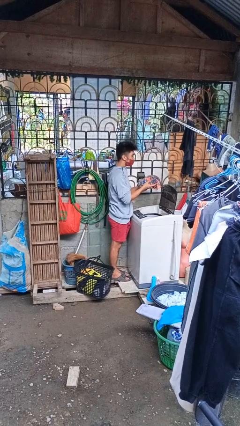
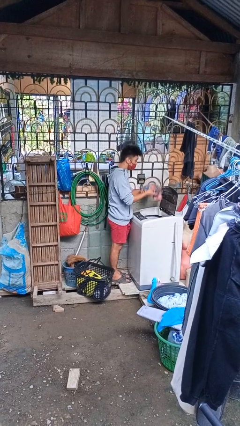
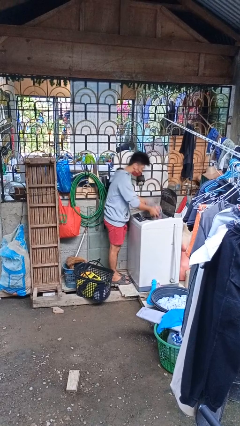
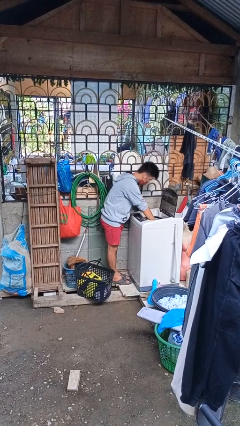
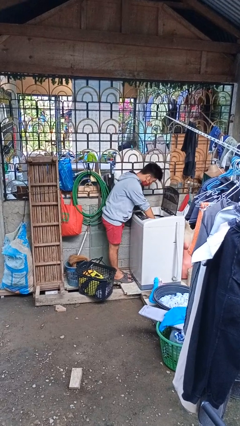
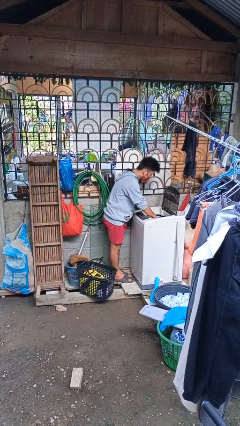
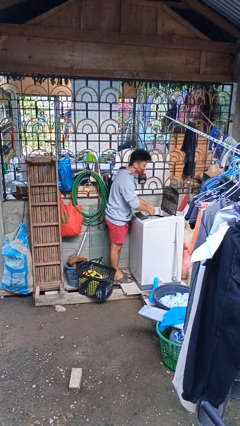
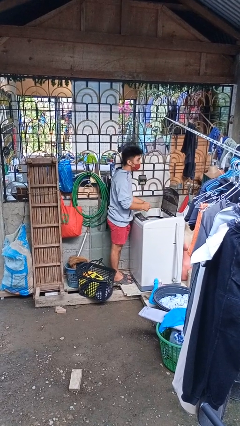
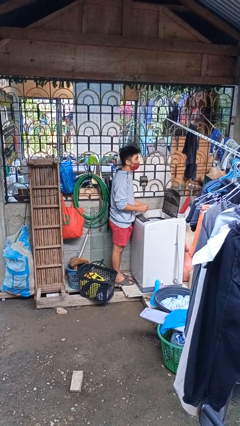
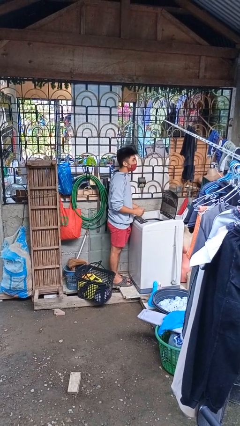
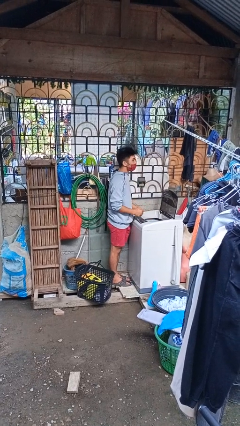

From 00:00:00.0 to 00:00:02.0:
person loads dryer

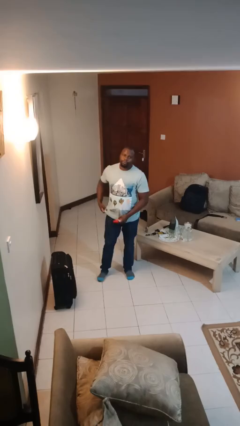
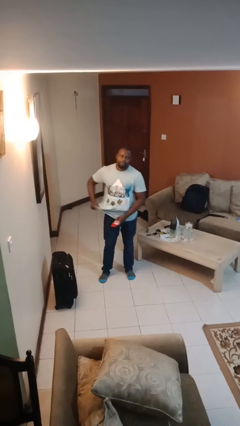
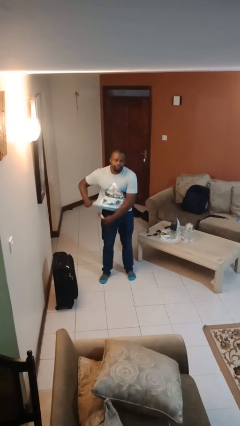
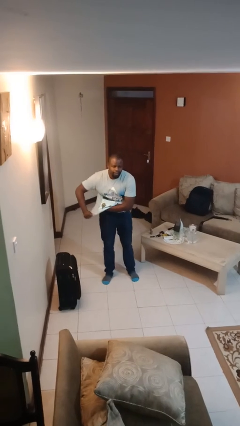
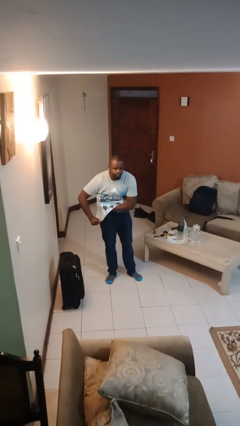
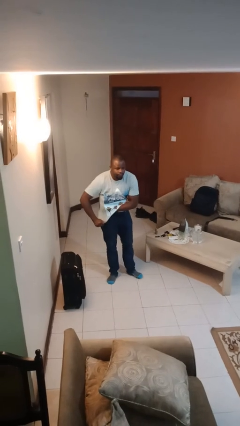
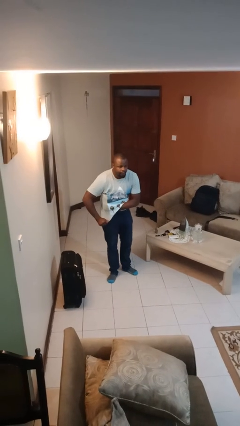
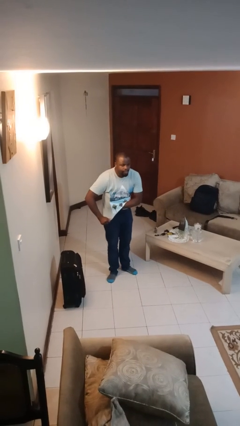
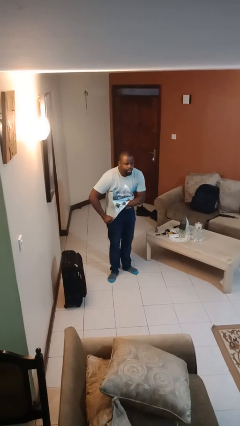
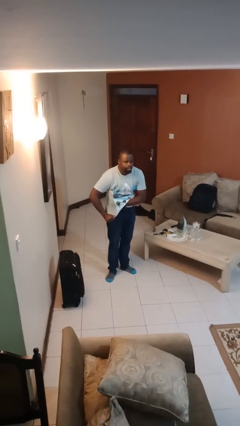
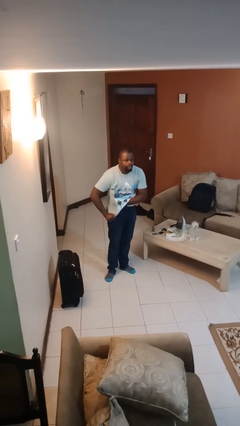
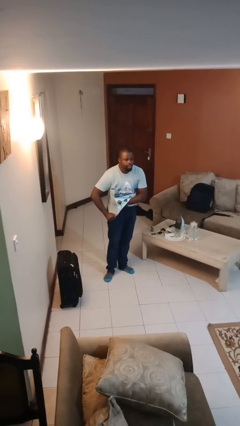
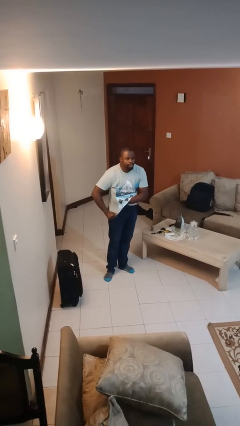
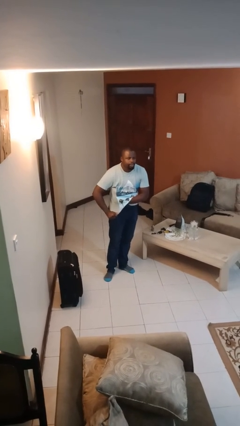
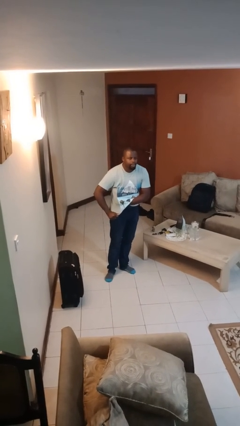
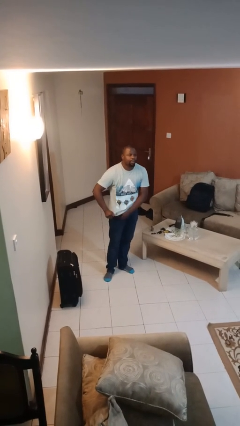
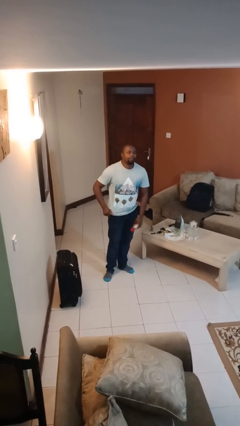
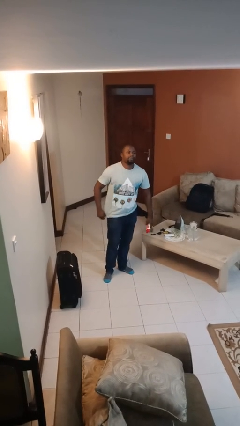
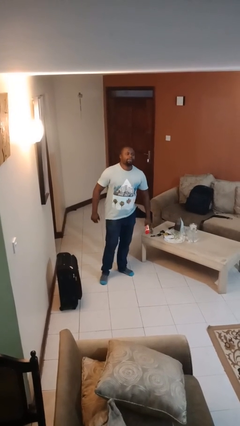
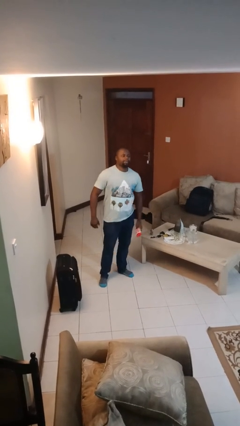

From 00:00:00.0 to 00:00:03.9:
person applies deodorant

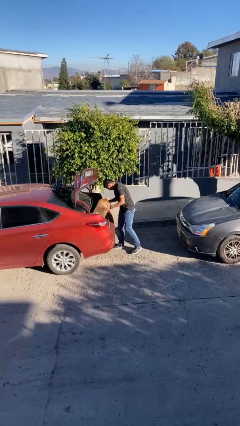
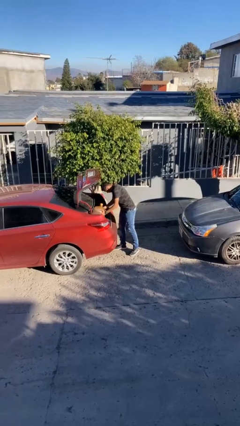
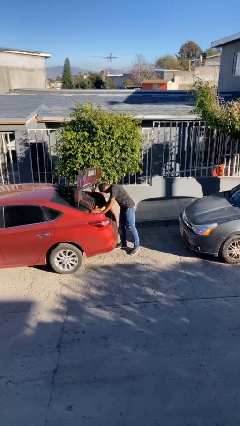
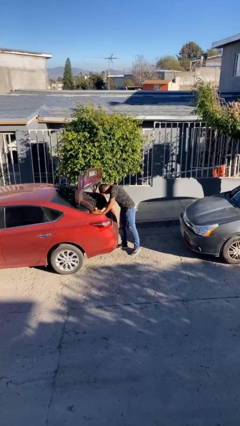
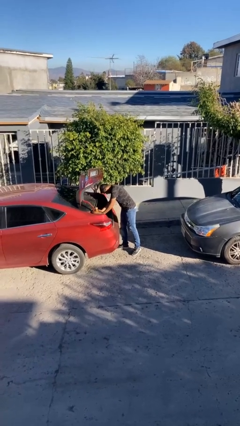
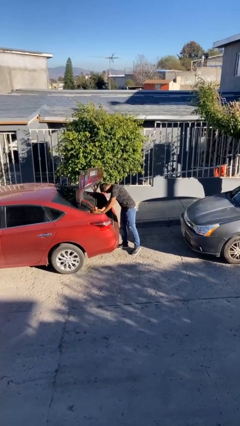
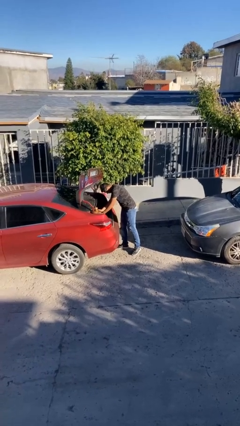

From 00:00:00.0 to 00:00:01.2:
person loads car

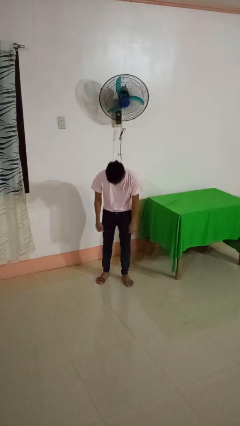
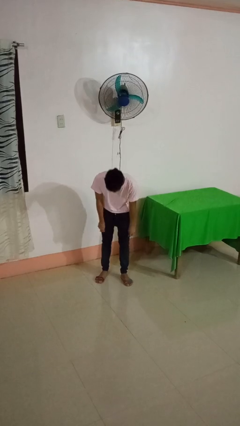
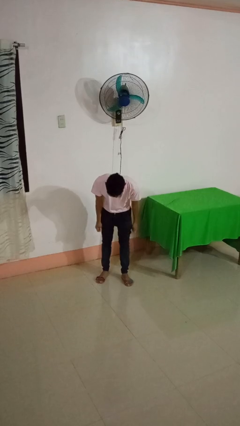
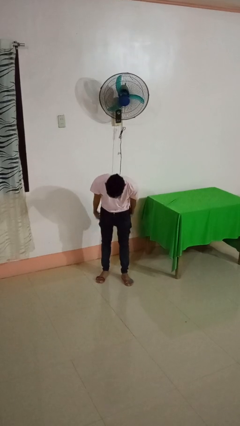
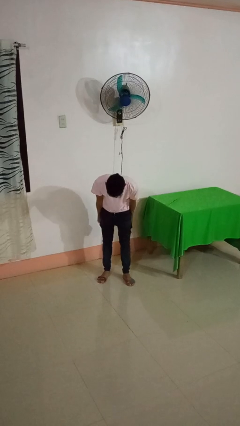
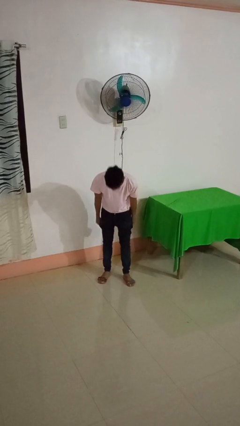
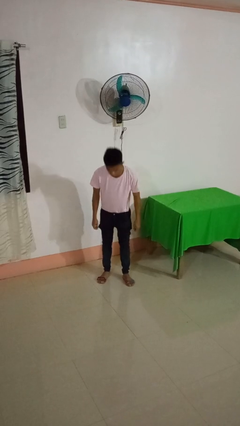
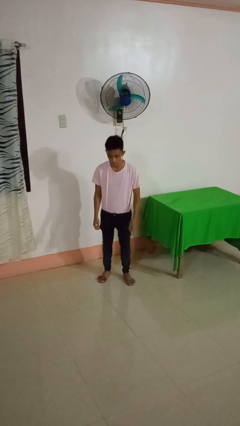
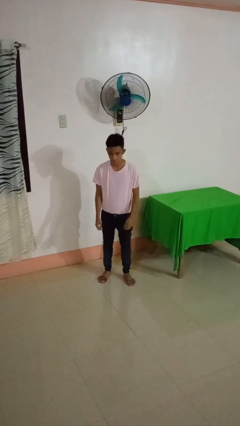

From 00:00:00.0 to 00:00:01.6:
person hikes up pants

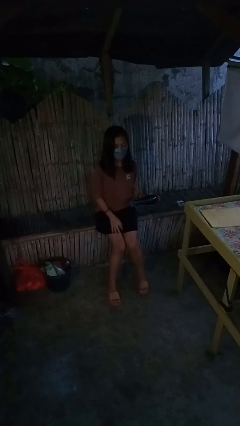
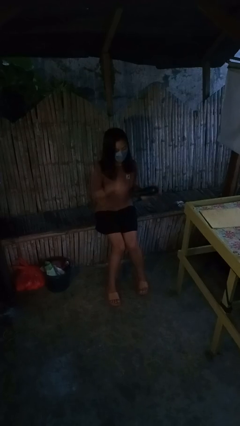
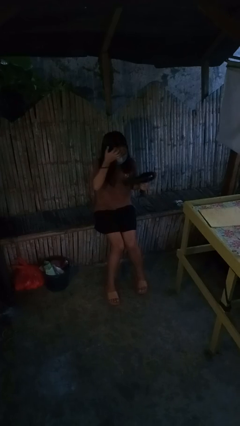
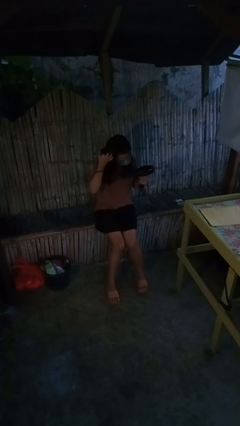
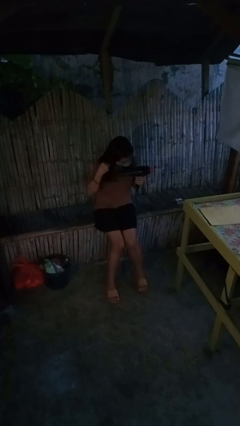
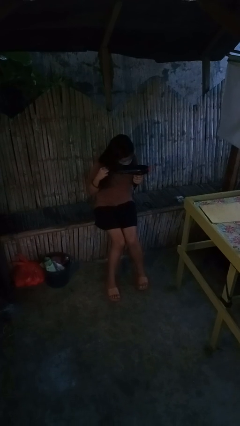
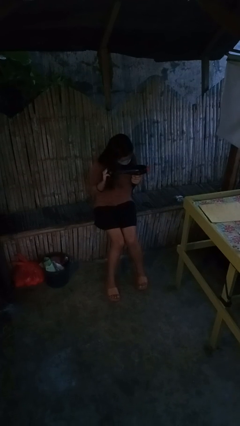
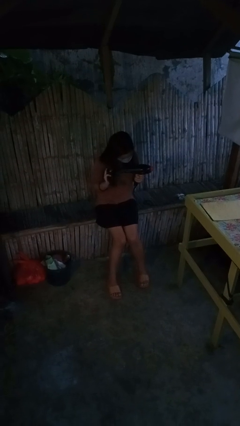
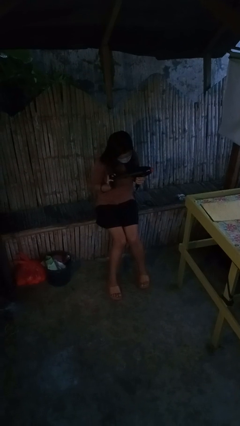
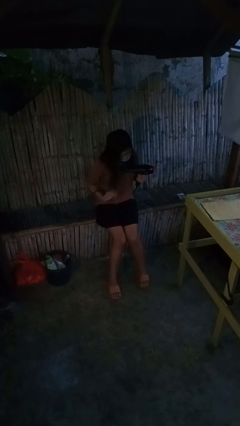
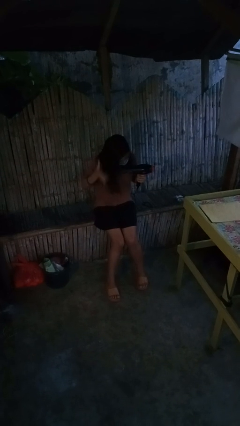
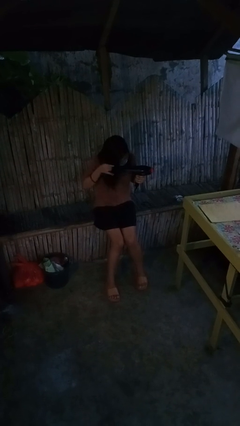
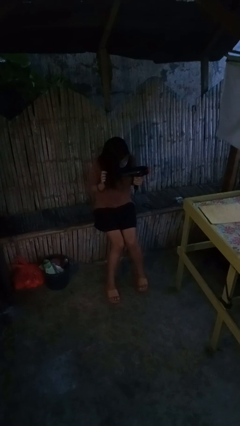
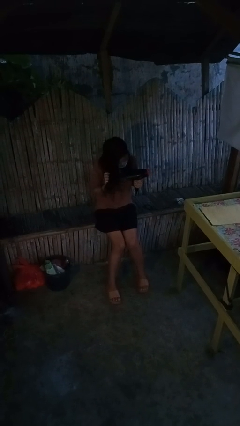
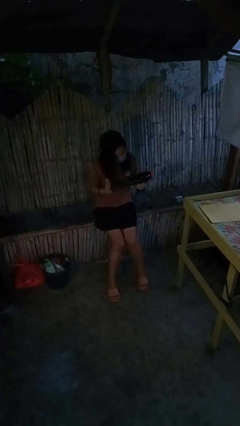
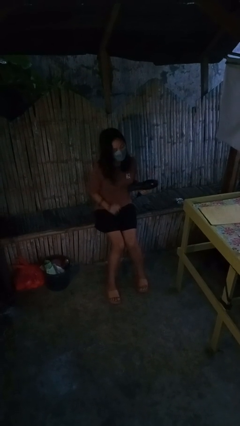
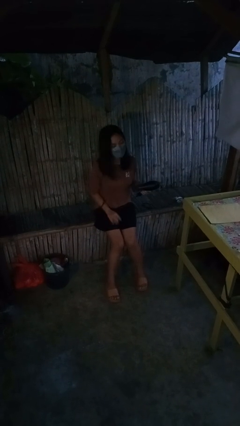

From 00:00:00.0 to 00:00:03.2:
person dries hair with hairdryer

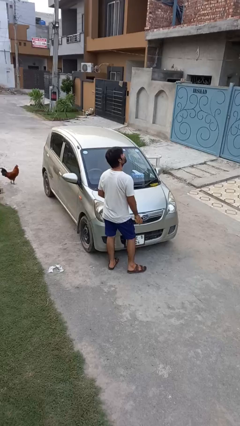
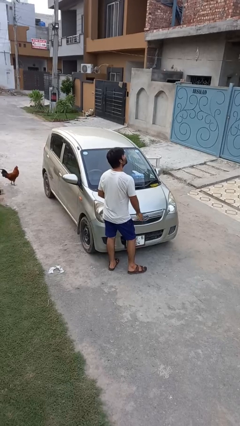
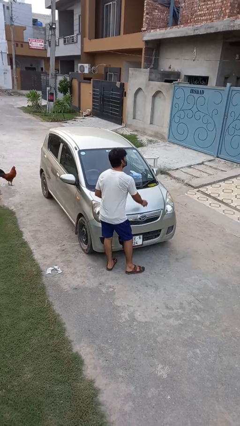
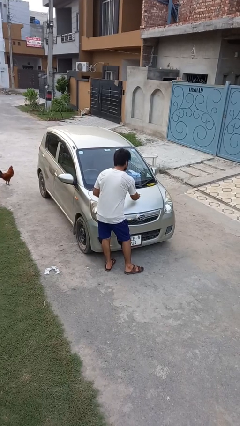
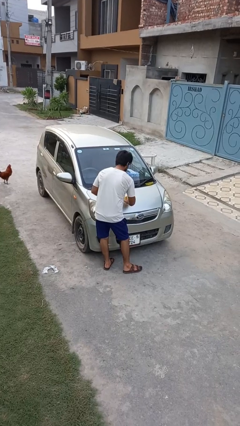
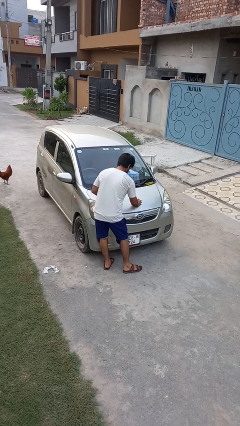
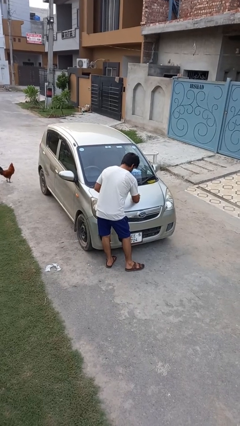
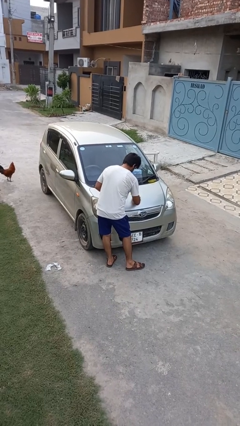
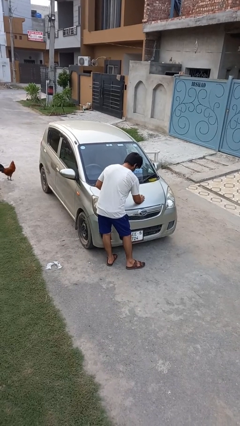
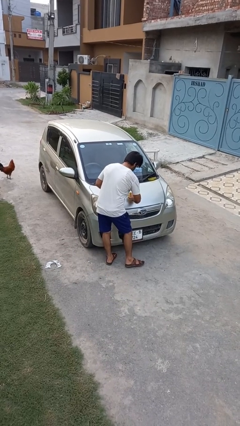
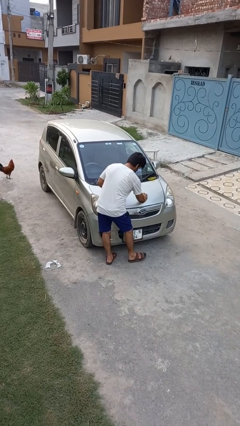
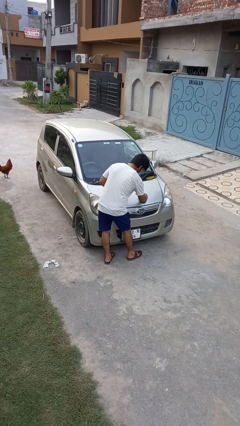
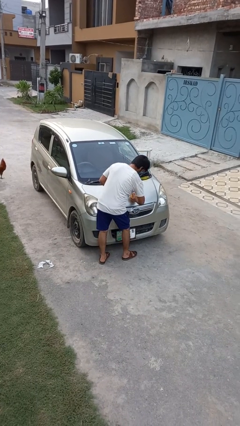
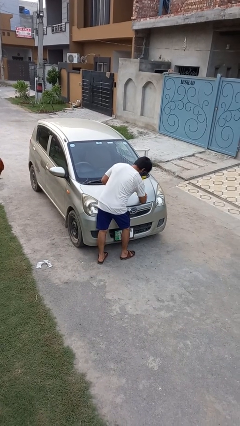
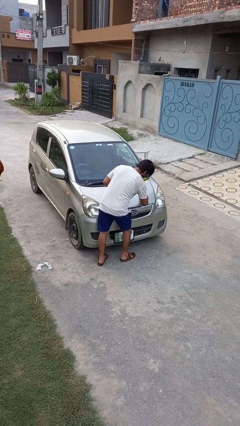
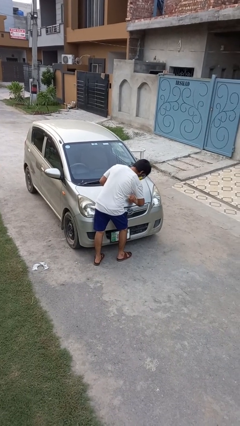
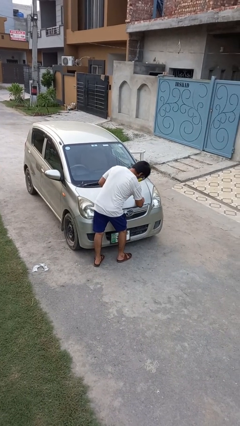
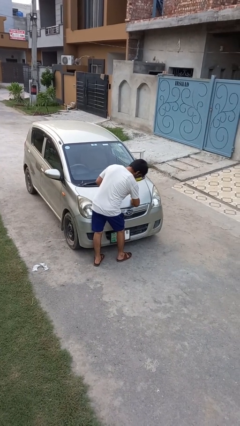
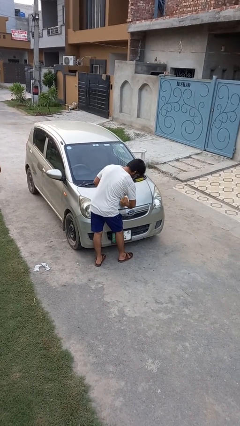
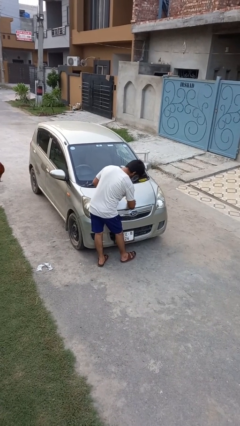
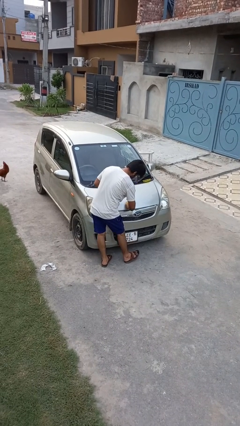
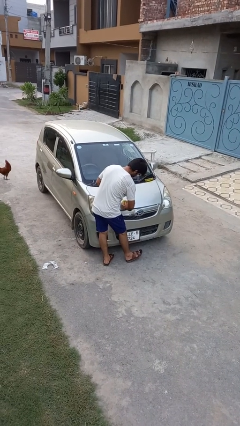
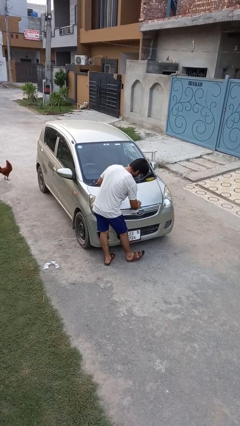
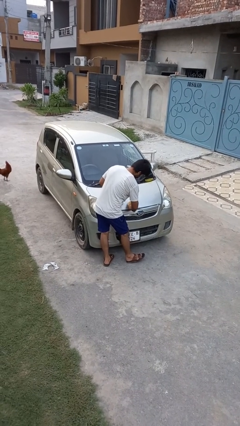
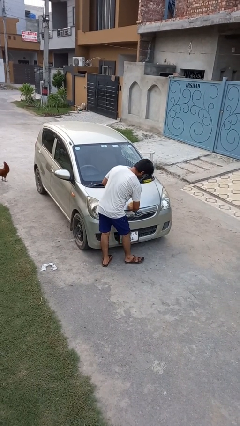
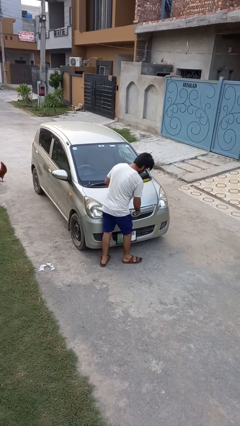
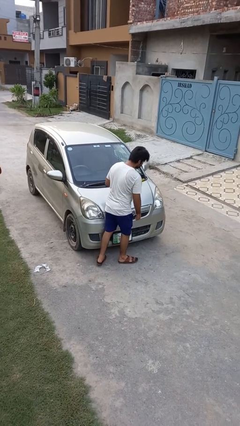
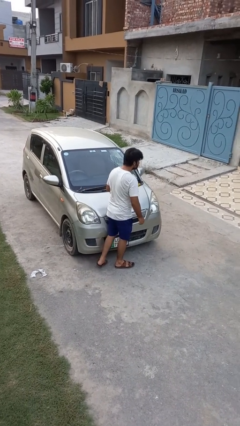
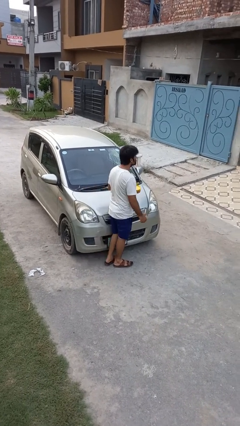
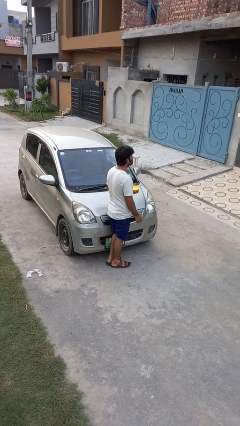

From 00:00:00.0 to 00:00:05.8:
person polishes car with rag

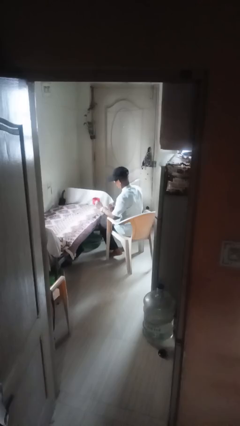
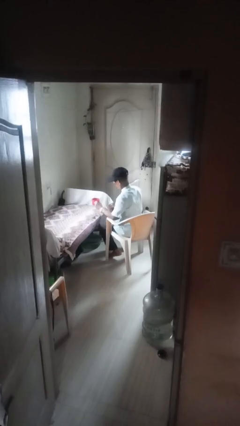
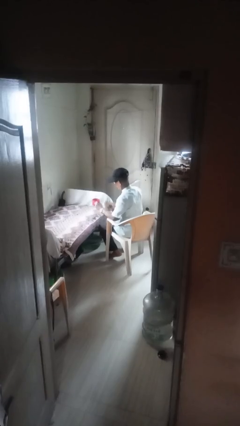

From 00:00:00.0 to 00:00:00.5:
person pours coffee into mug
